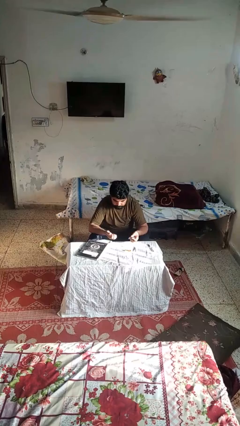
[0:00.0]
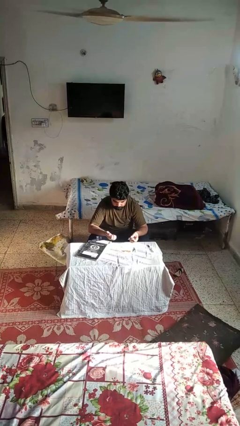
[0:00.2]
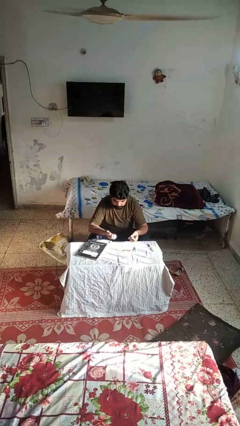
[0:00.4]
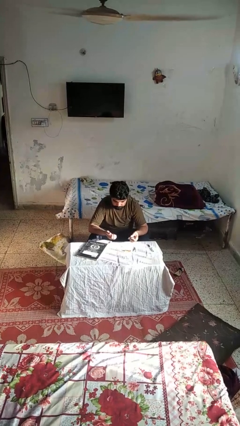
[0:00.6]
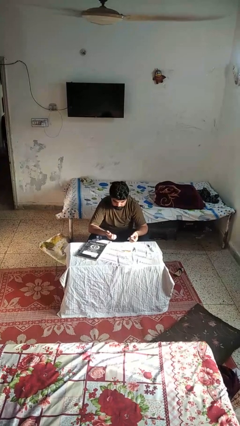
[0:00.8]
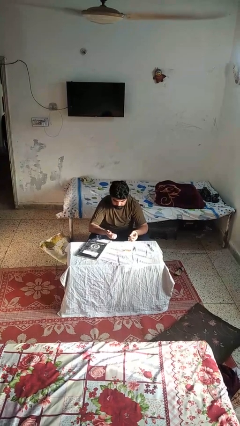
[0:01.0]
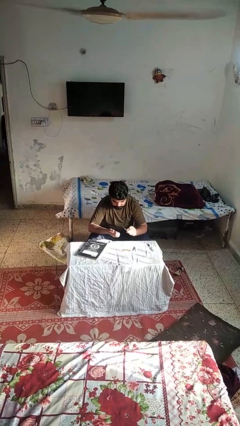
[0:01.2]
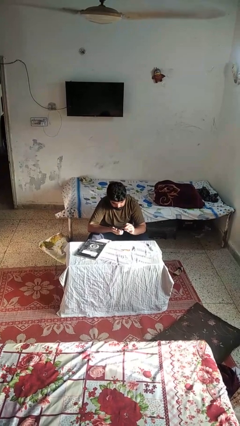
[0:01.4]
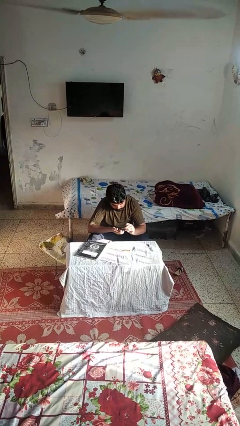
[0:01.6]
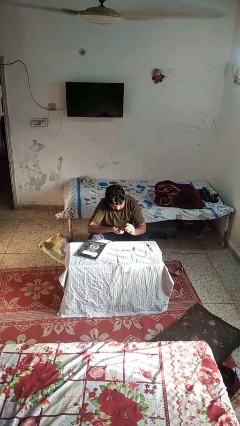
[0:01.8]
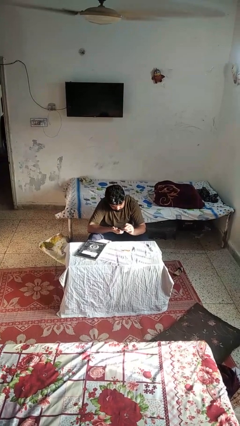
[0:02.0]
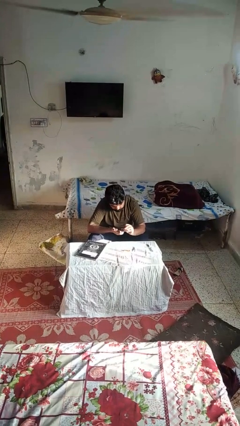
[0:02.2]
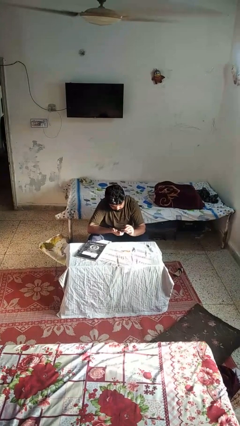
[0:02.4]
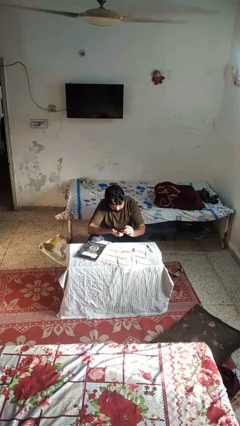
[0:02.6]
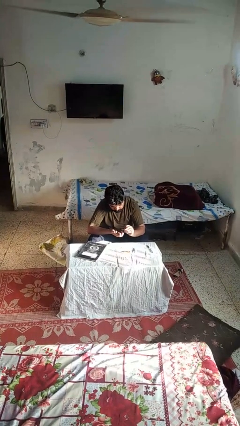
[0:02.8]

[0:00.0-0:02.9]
person files fingernails

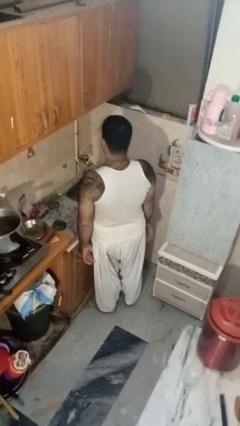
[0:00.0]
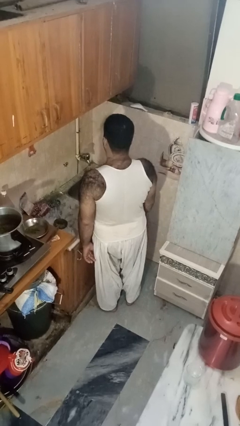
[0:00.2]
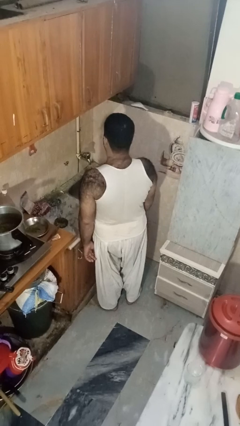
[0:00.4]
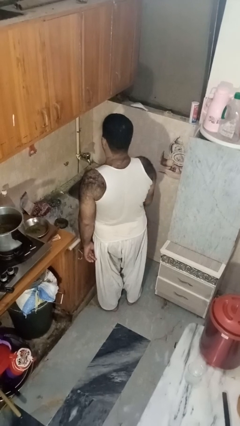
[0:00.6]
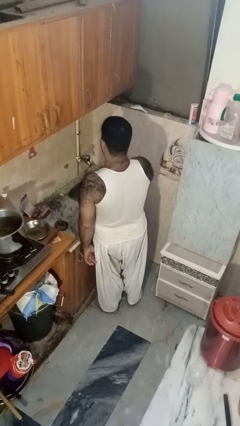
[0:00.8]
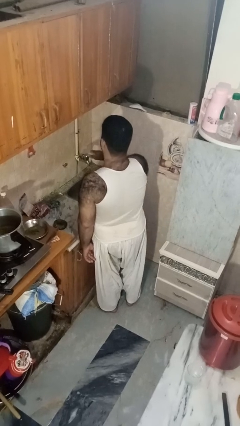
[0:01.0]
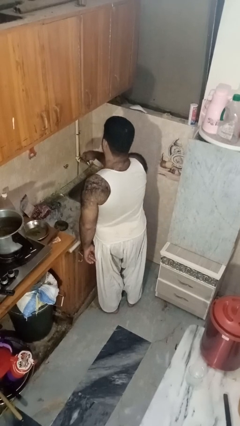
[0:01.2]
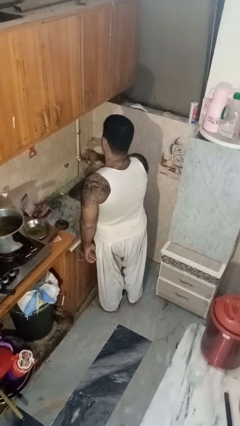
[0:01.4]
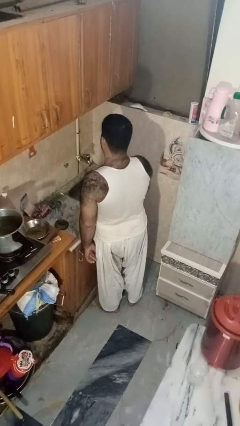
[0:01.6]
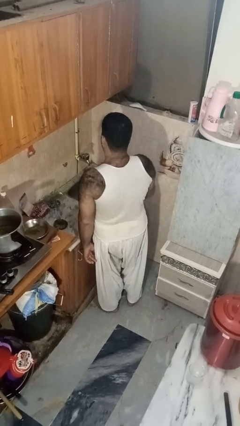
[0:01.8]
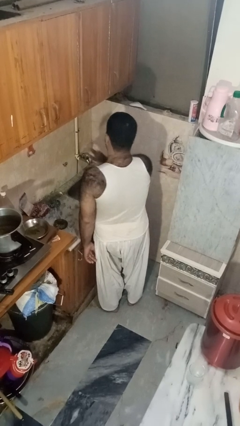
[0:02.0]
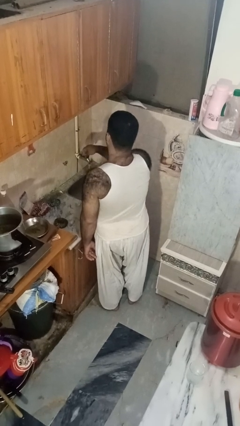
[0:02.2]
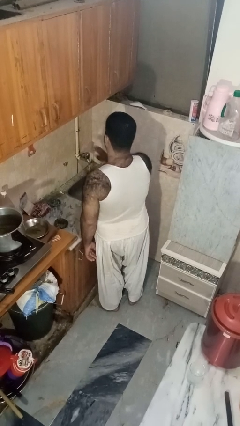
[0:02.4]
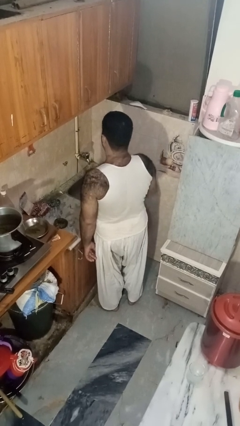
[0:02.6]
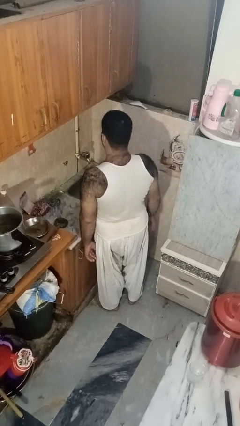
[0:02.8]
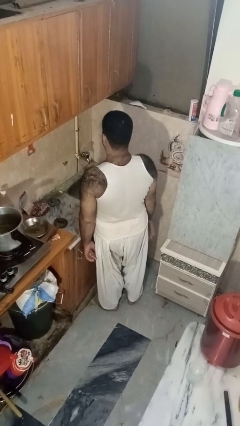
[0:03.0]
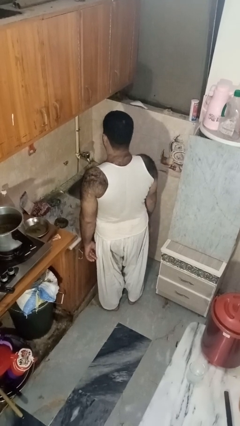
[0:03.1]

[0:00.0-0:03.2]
person turns on faucet

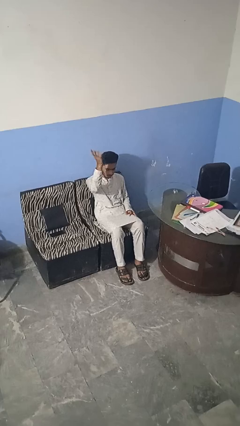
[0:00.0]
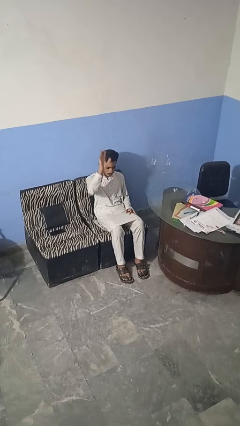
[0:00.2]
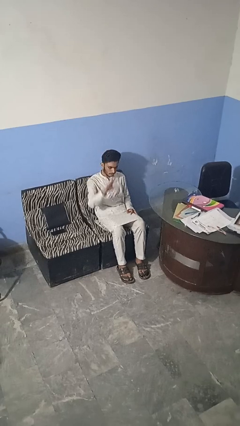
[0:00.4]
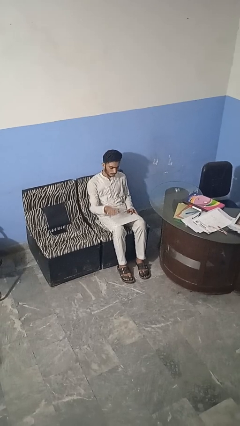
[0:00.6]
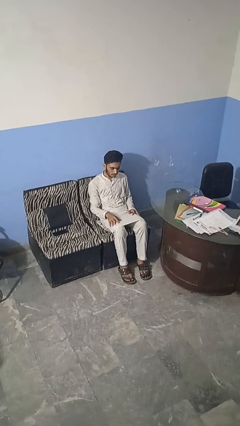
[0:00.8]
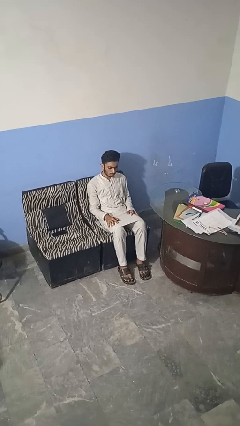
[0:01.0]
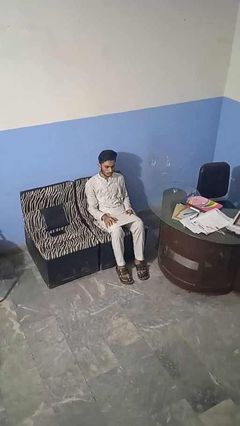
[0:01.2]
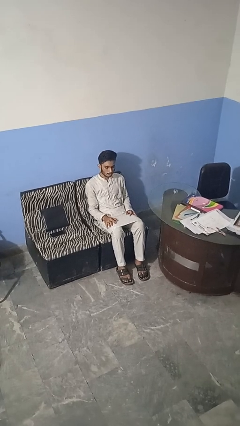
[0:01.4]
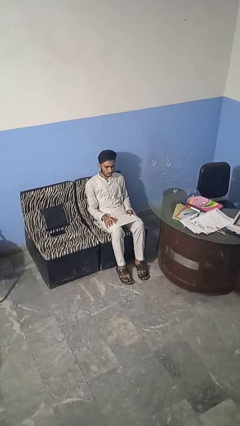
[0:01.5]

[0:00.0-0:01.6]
person gestures swipe down

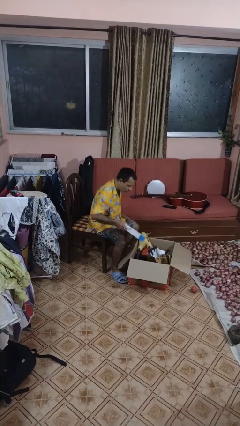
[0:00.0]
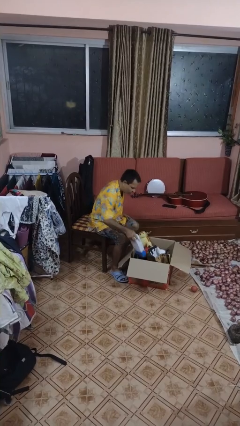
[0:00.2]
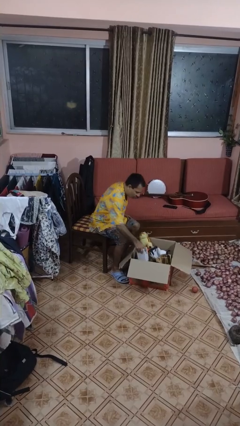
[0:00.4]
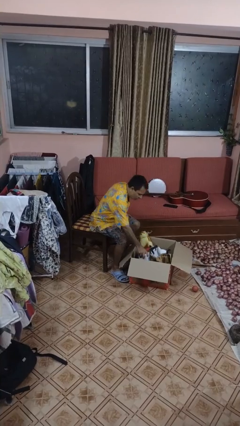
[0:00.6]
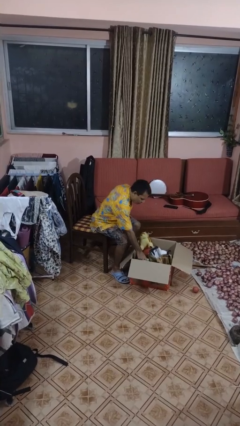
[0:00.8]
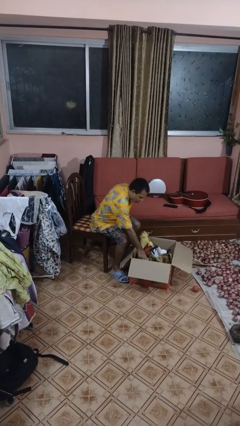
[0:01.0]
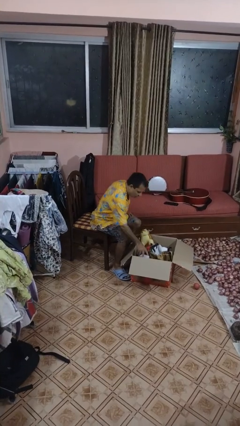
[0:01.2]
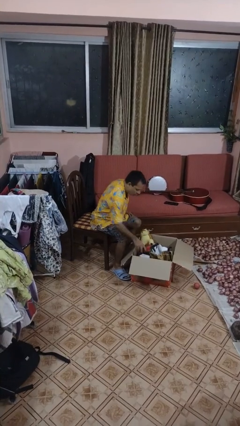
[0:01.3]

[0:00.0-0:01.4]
person puts object into box

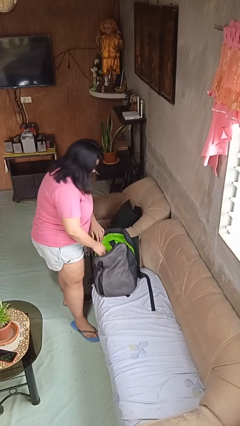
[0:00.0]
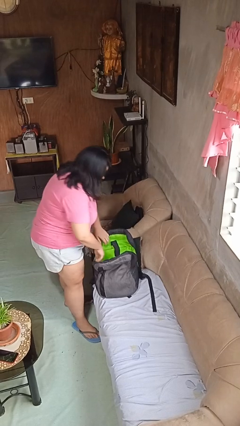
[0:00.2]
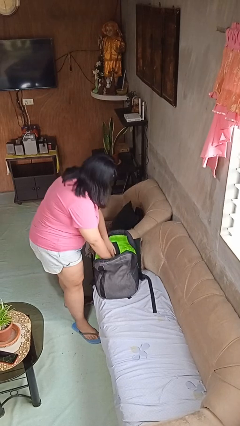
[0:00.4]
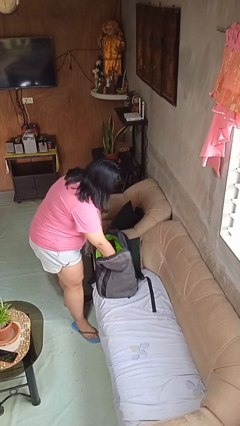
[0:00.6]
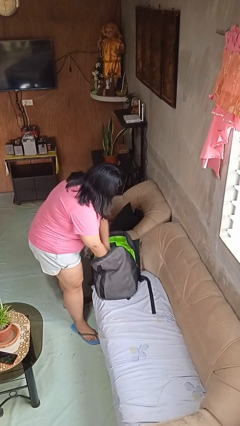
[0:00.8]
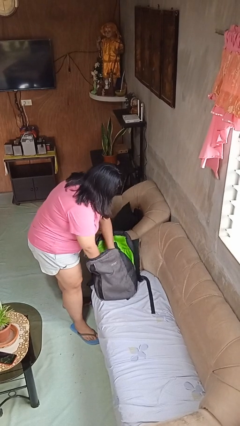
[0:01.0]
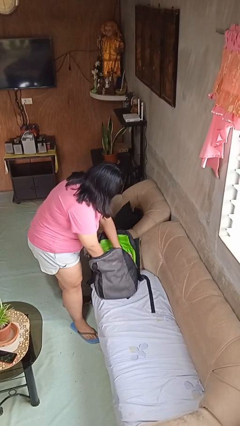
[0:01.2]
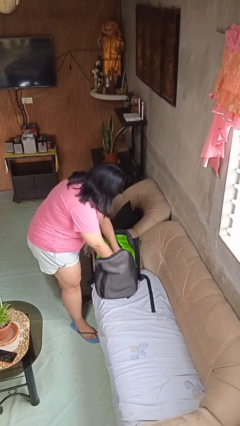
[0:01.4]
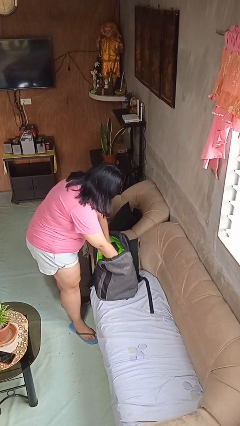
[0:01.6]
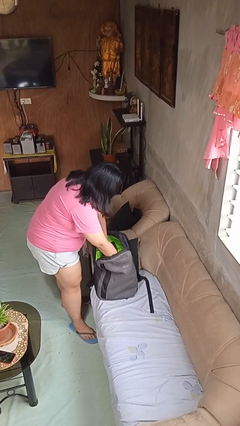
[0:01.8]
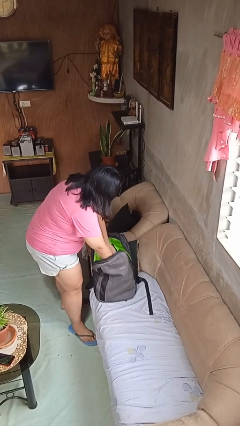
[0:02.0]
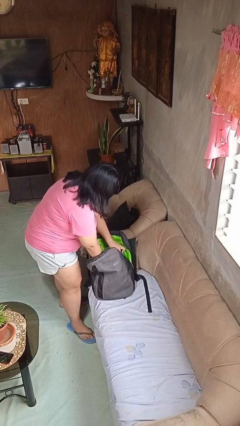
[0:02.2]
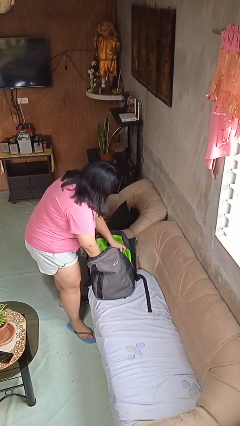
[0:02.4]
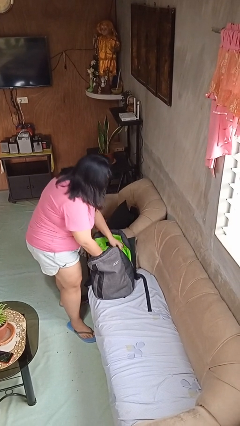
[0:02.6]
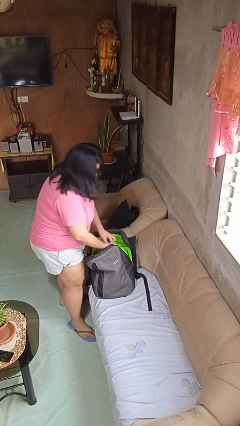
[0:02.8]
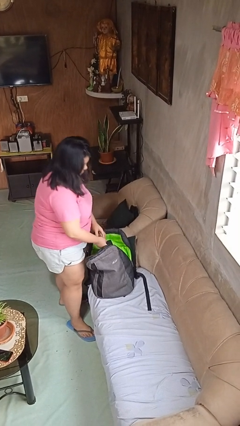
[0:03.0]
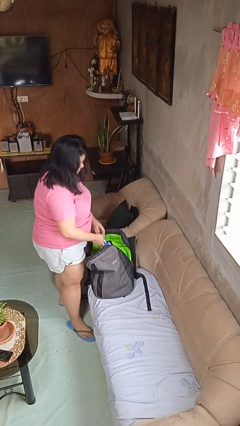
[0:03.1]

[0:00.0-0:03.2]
person searches in backpack

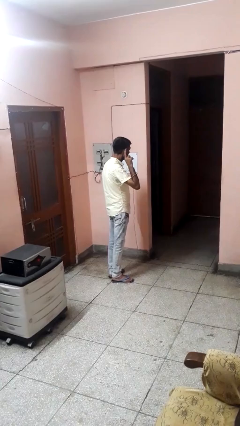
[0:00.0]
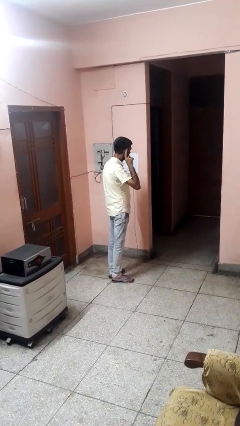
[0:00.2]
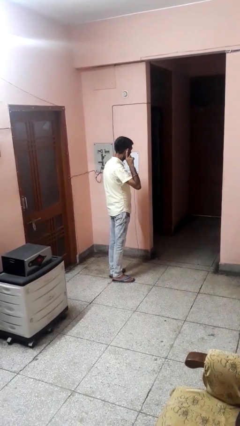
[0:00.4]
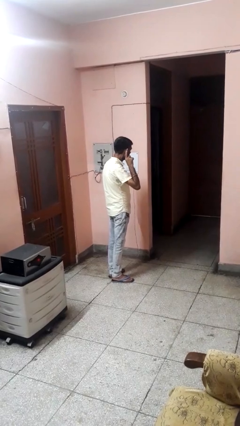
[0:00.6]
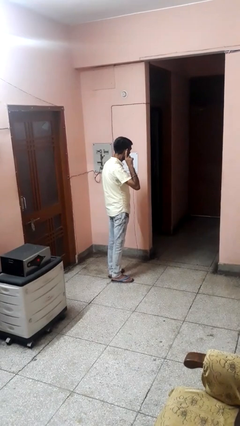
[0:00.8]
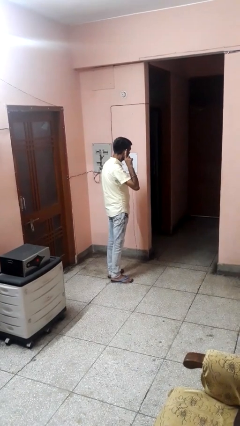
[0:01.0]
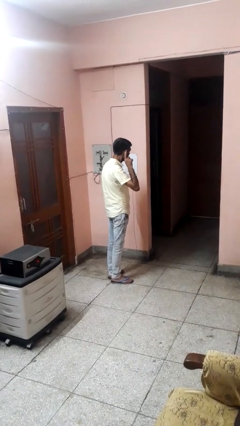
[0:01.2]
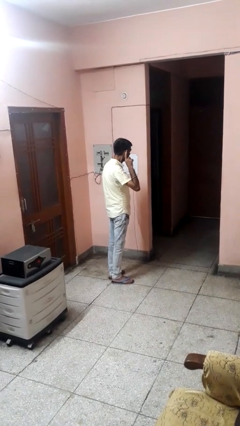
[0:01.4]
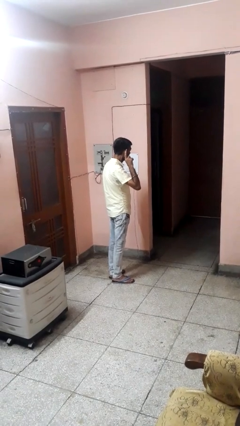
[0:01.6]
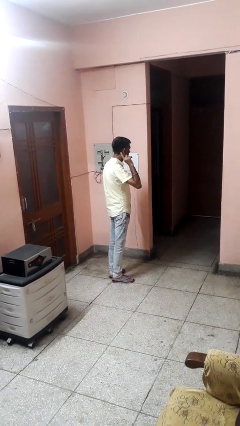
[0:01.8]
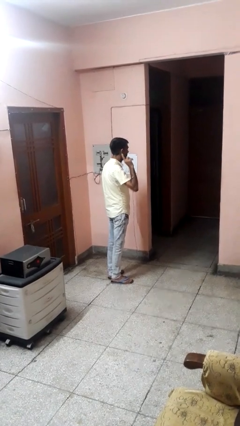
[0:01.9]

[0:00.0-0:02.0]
person gestures listen closely

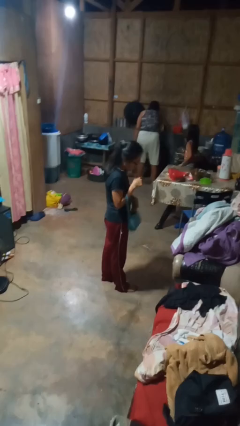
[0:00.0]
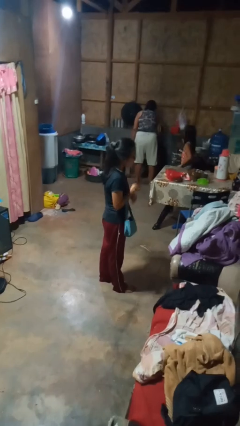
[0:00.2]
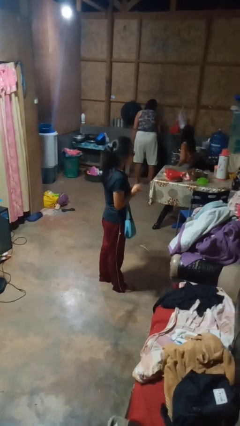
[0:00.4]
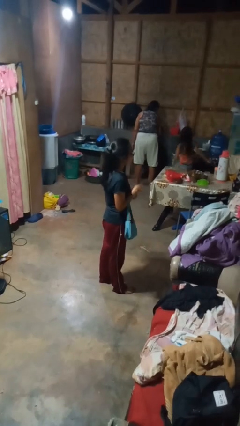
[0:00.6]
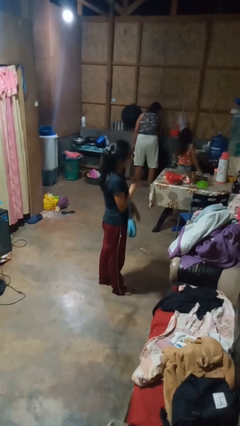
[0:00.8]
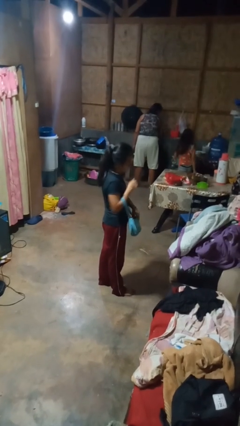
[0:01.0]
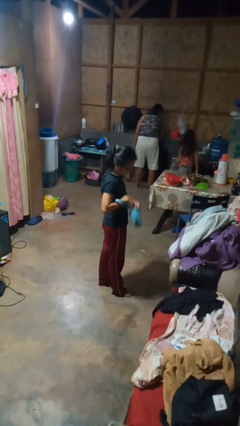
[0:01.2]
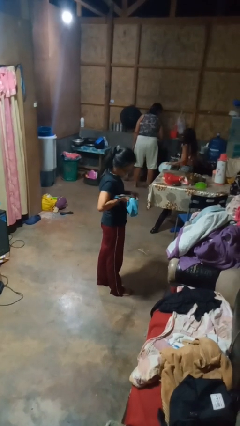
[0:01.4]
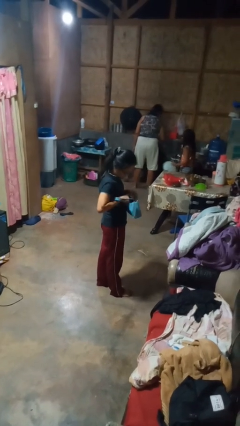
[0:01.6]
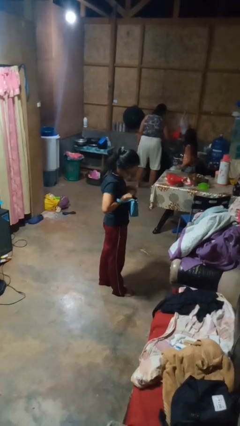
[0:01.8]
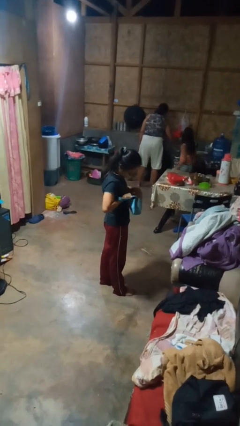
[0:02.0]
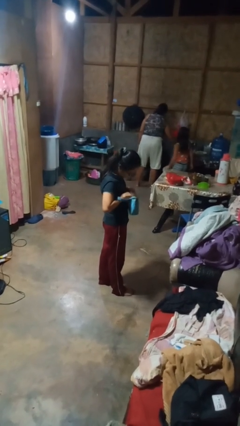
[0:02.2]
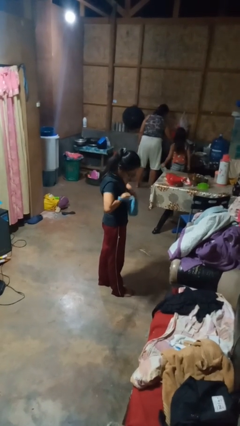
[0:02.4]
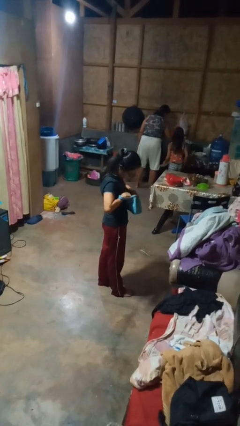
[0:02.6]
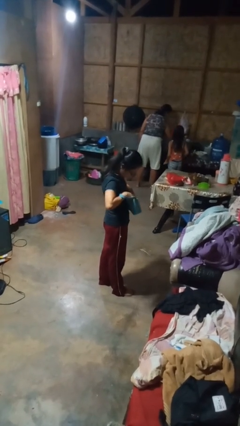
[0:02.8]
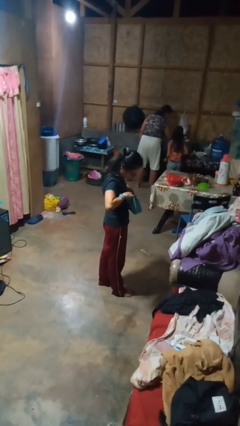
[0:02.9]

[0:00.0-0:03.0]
person searches in purse
